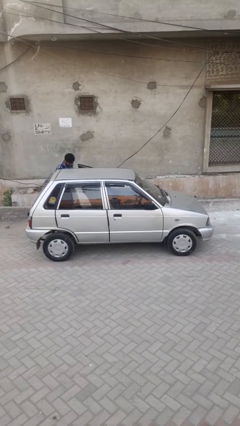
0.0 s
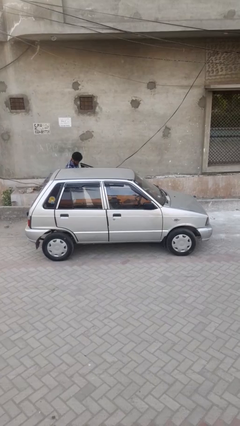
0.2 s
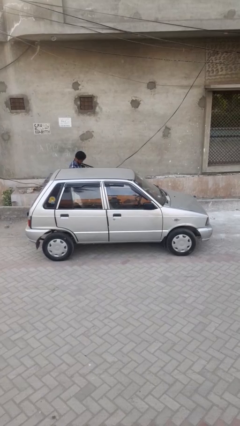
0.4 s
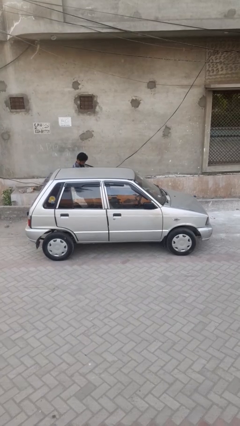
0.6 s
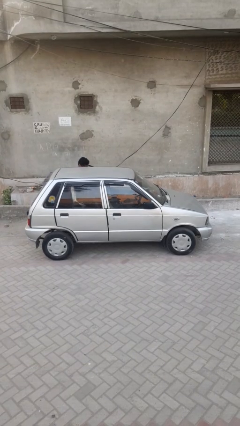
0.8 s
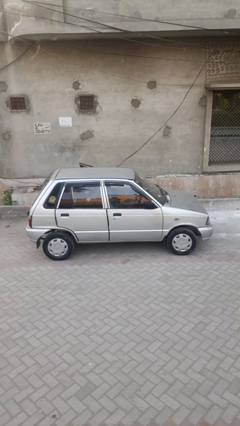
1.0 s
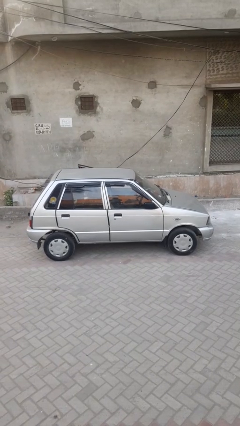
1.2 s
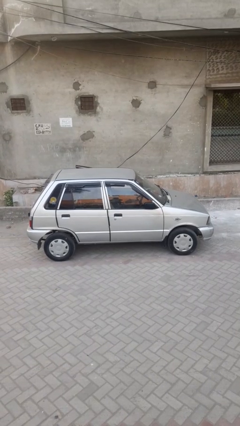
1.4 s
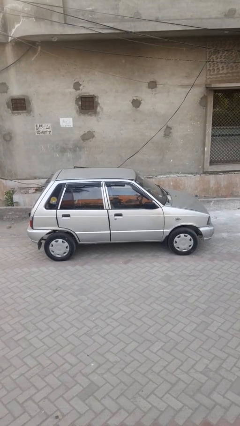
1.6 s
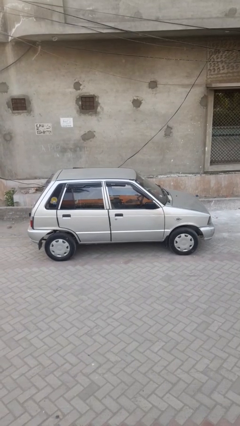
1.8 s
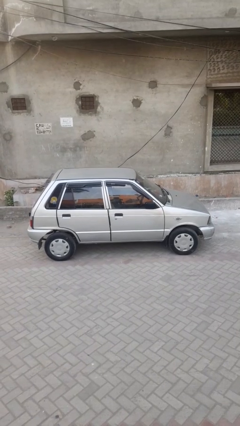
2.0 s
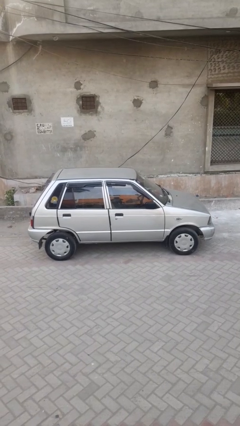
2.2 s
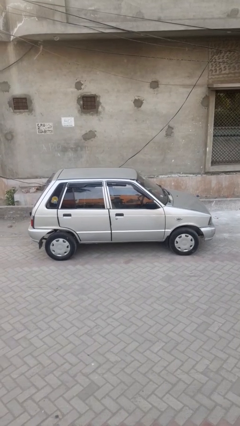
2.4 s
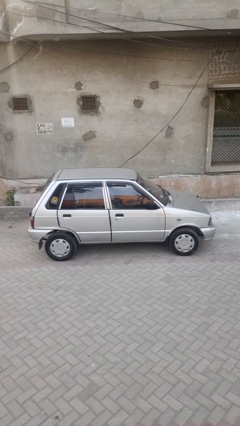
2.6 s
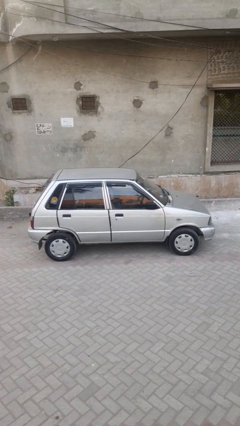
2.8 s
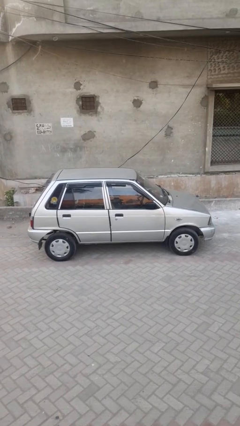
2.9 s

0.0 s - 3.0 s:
car picks up person

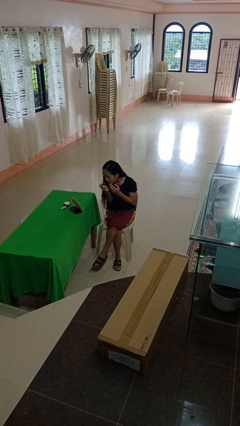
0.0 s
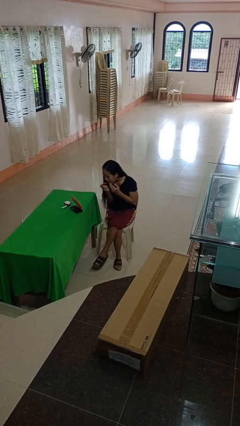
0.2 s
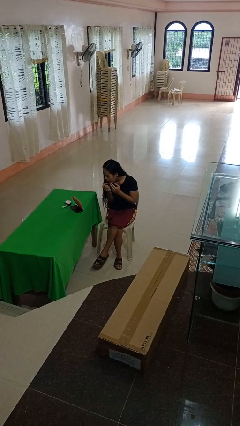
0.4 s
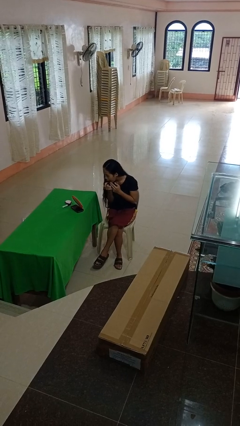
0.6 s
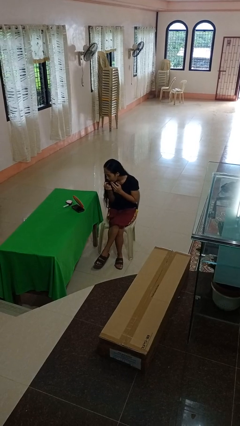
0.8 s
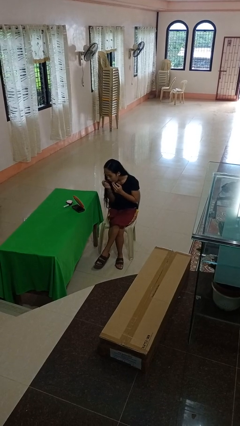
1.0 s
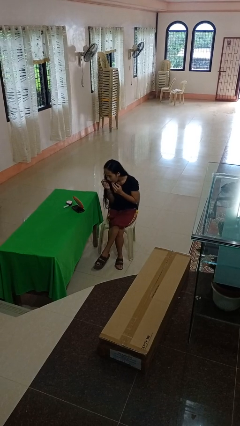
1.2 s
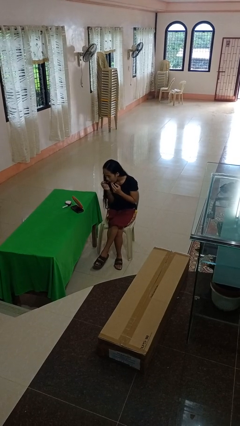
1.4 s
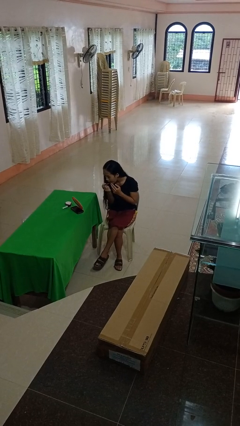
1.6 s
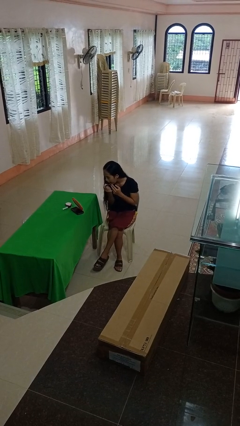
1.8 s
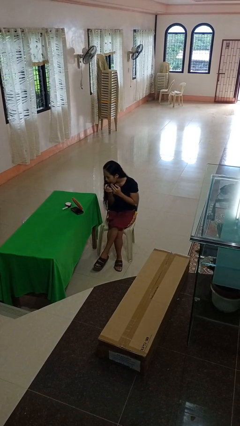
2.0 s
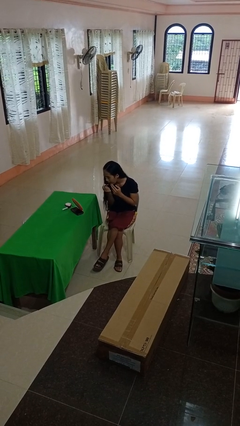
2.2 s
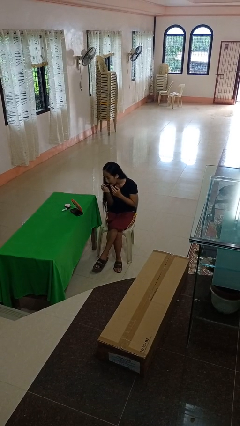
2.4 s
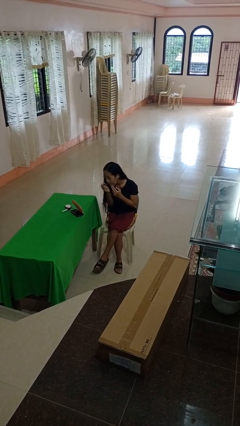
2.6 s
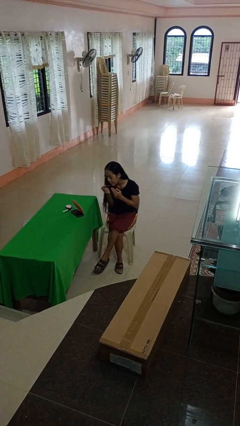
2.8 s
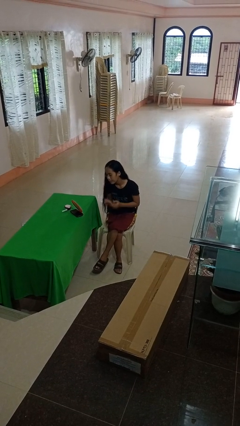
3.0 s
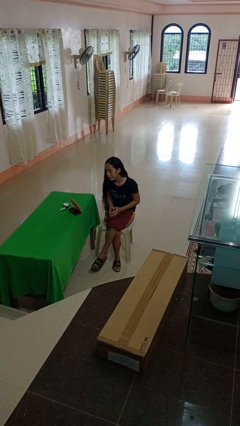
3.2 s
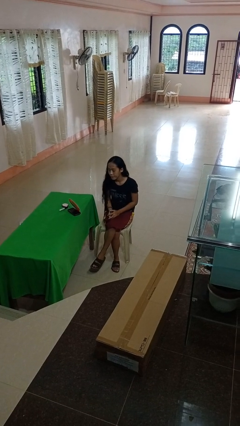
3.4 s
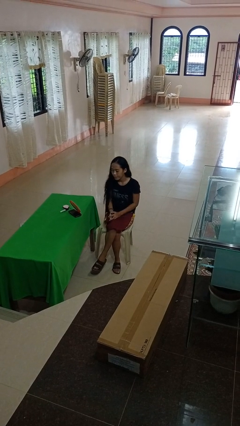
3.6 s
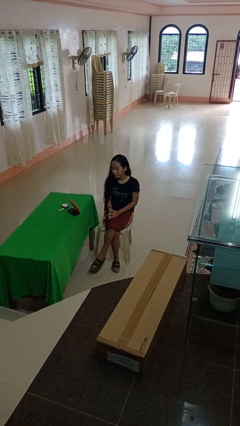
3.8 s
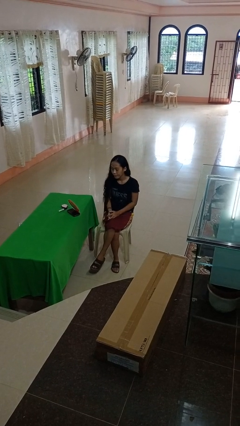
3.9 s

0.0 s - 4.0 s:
person applies lip makeup

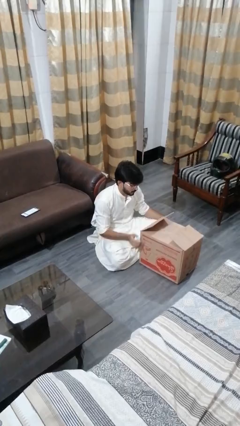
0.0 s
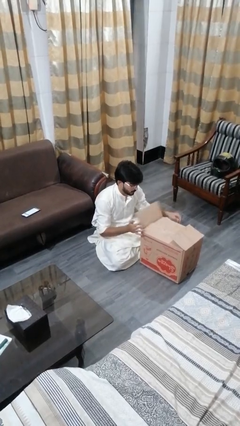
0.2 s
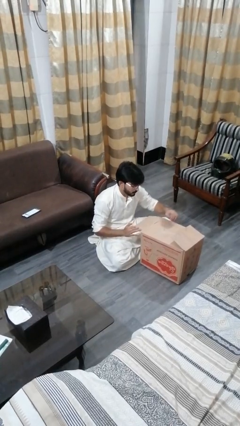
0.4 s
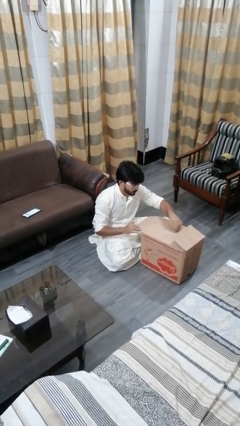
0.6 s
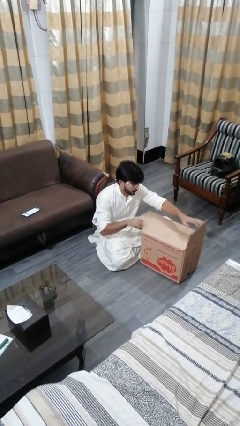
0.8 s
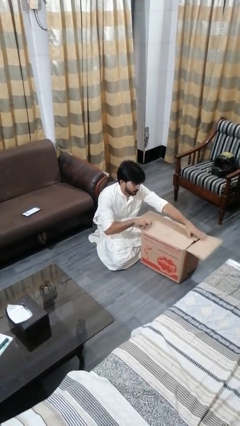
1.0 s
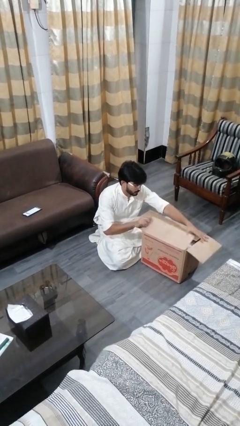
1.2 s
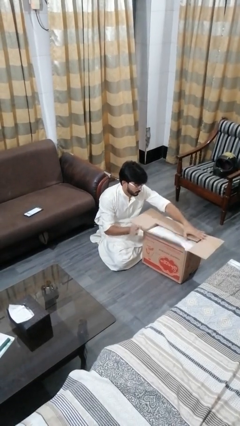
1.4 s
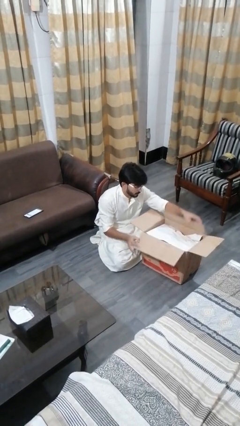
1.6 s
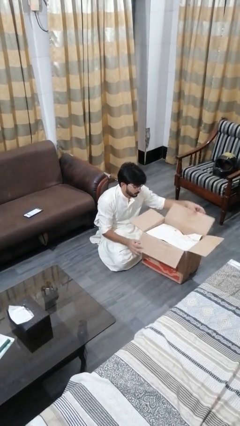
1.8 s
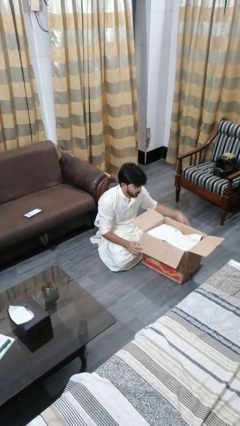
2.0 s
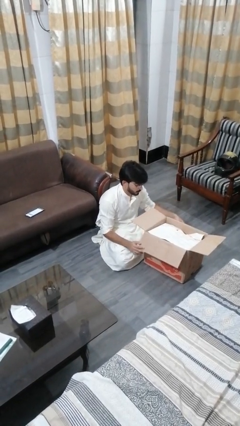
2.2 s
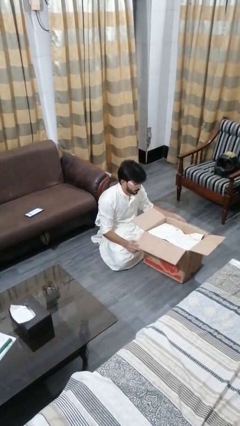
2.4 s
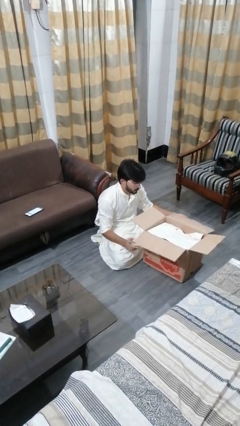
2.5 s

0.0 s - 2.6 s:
person opens box

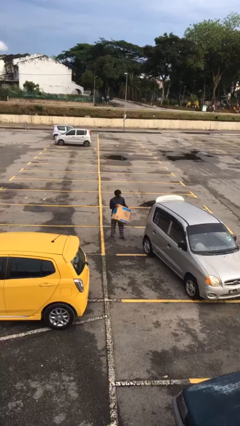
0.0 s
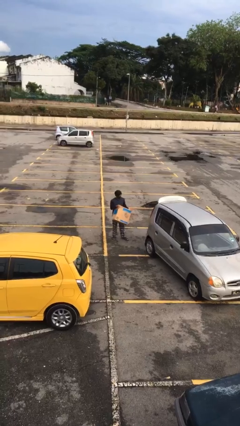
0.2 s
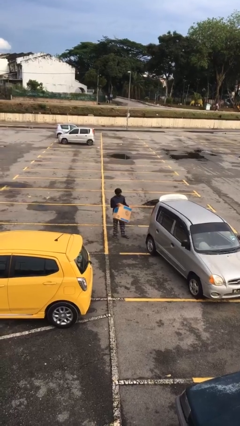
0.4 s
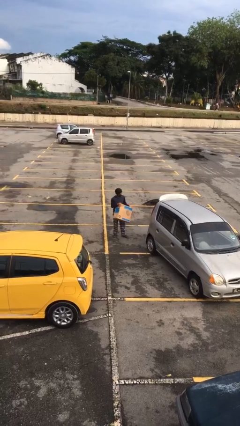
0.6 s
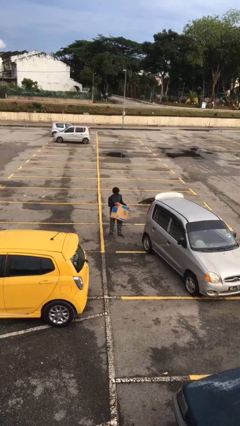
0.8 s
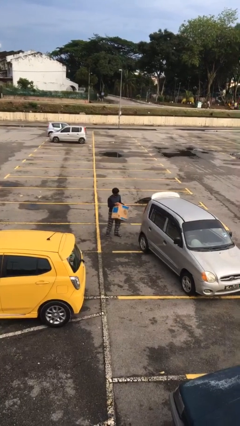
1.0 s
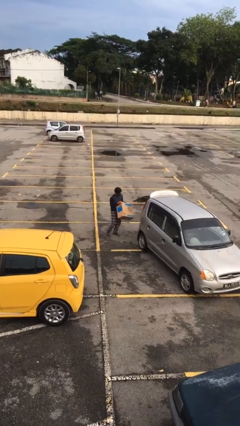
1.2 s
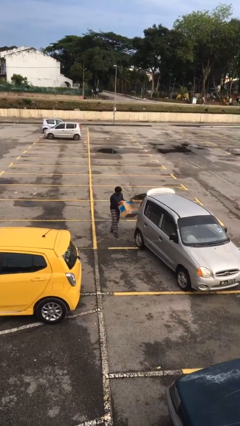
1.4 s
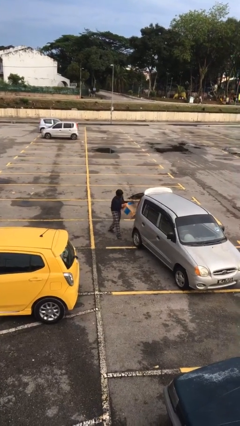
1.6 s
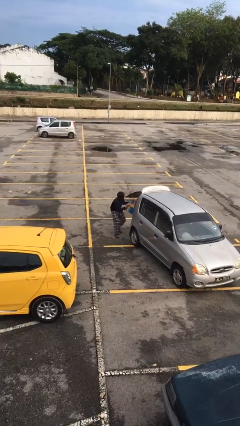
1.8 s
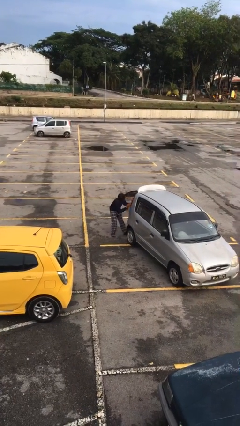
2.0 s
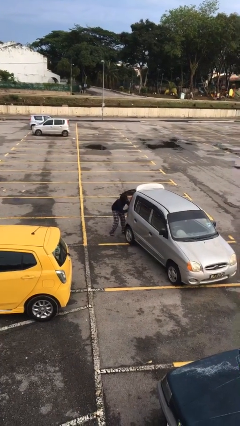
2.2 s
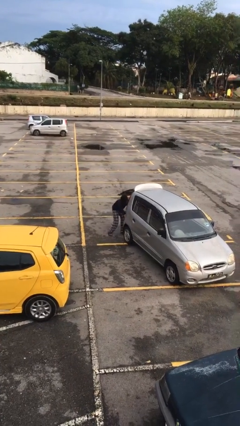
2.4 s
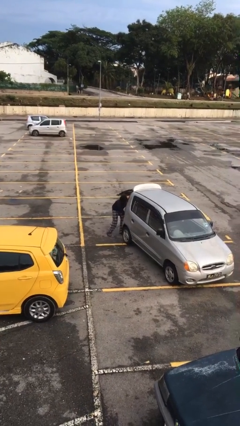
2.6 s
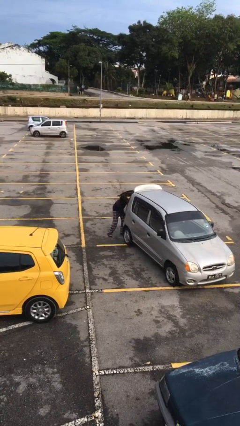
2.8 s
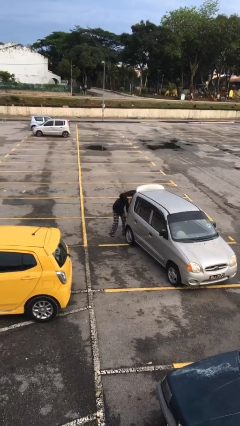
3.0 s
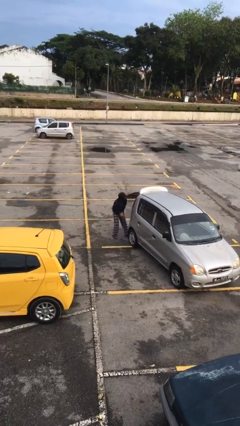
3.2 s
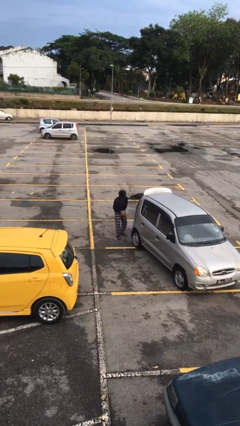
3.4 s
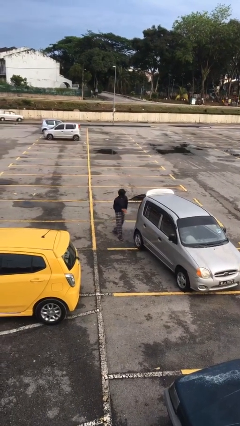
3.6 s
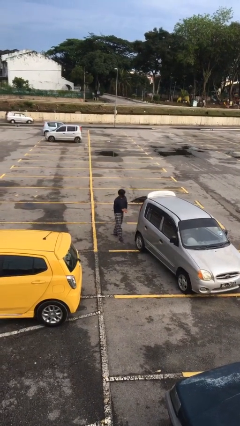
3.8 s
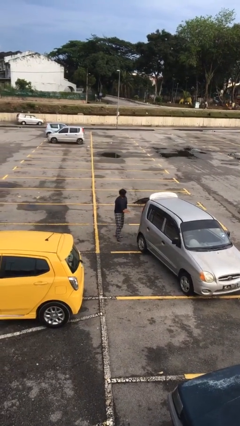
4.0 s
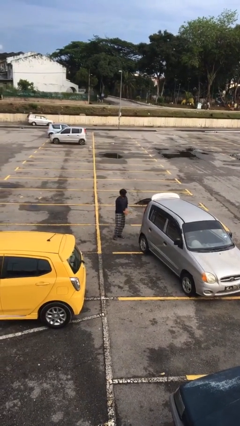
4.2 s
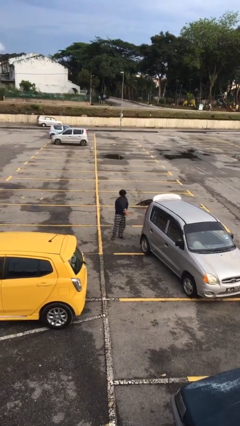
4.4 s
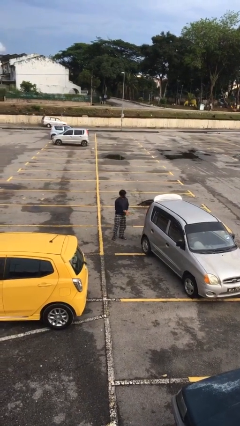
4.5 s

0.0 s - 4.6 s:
person loads car

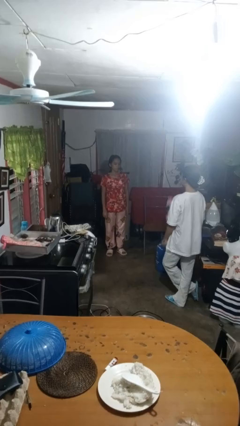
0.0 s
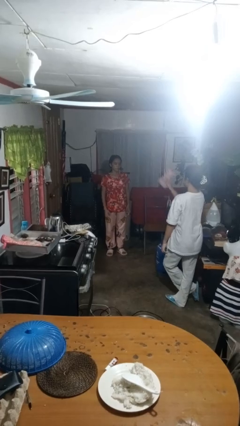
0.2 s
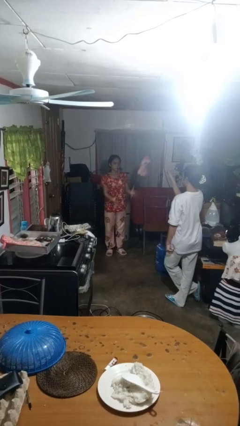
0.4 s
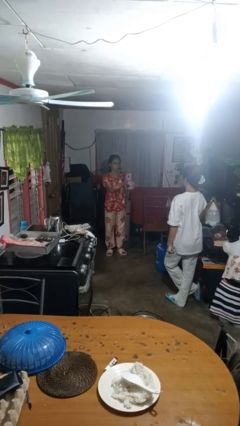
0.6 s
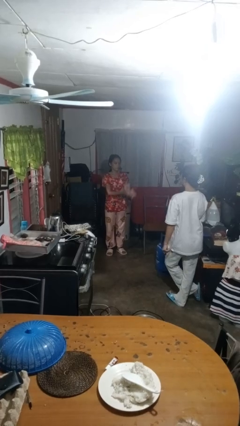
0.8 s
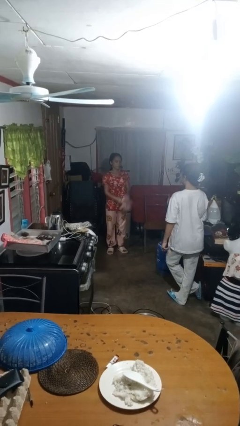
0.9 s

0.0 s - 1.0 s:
person catches object from person

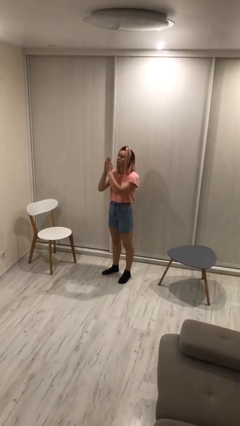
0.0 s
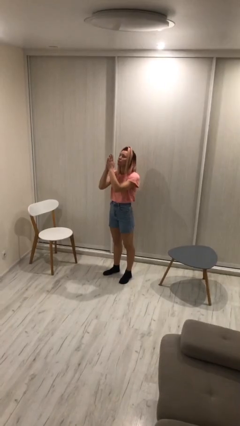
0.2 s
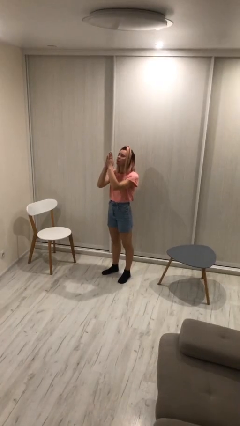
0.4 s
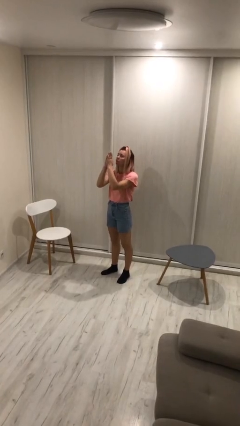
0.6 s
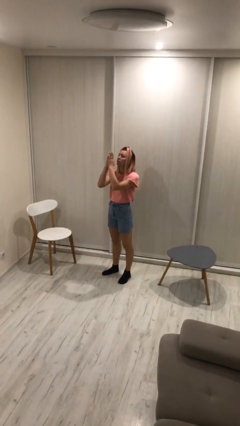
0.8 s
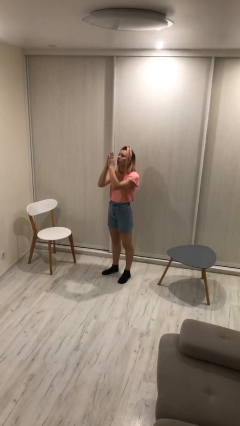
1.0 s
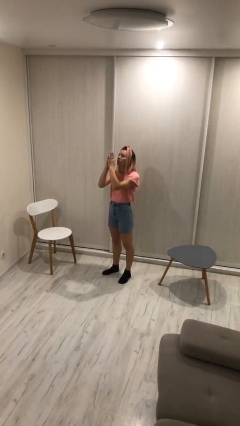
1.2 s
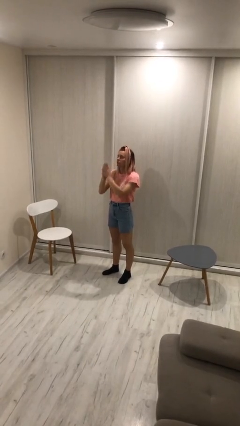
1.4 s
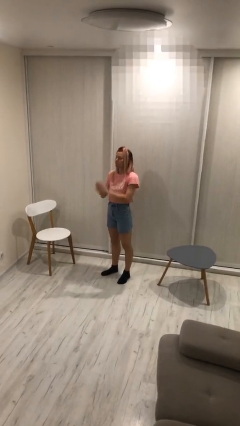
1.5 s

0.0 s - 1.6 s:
person prays

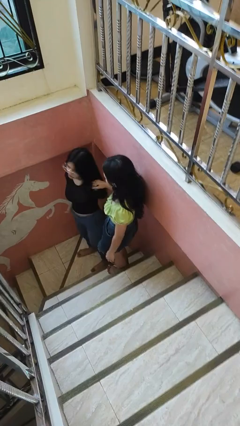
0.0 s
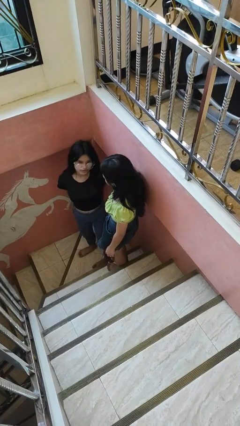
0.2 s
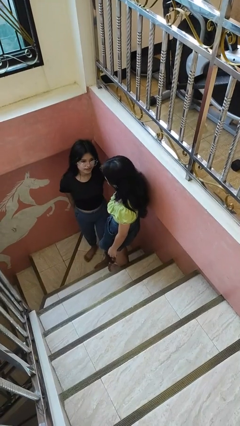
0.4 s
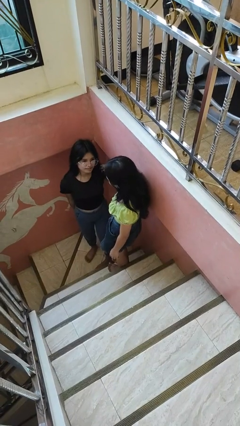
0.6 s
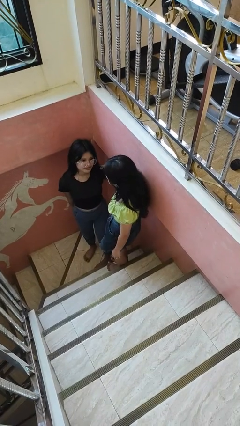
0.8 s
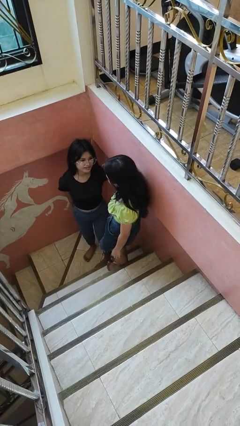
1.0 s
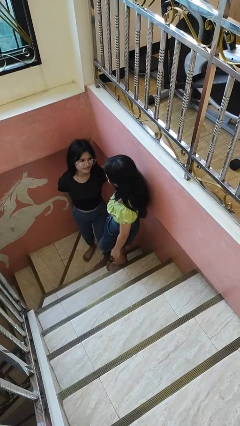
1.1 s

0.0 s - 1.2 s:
person spins person around
